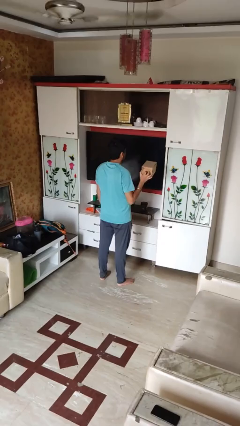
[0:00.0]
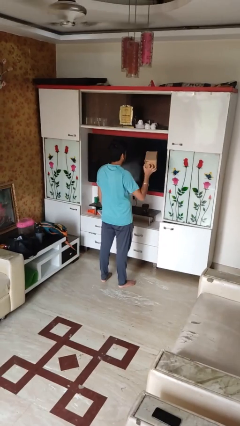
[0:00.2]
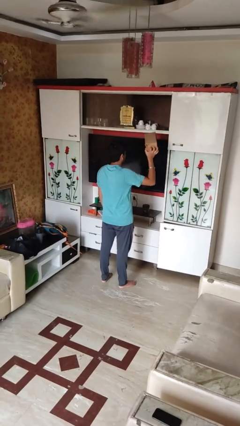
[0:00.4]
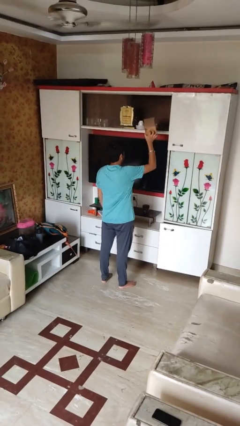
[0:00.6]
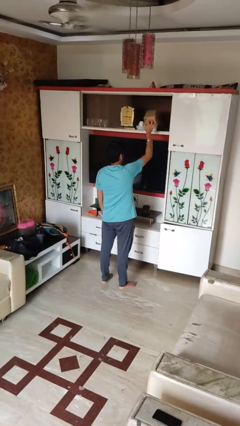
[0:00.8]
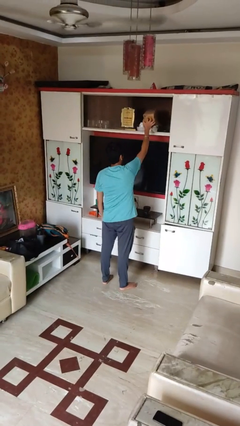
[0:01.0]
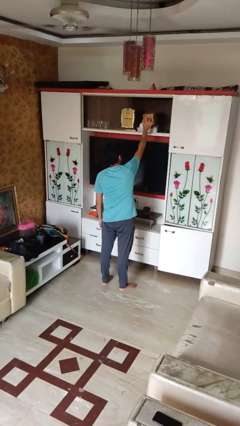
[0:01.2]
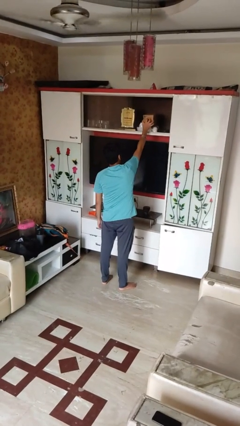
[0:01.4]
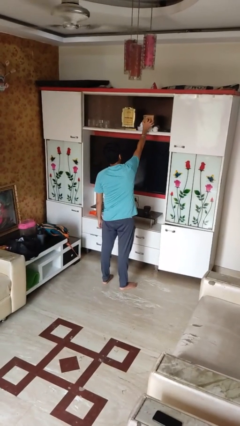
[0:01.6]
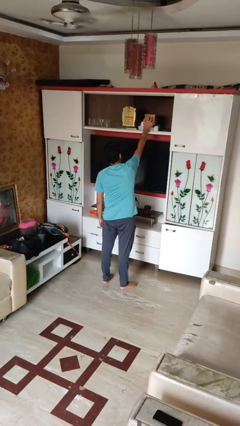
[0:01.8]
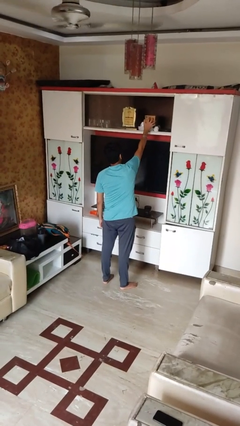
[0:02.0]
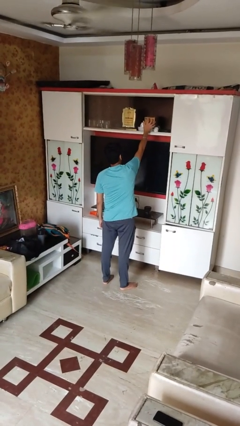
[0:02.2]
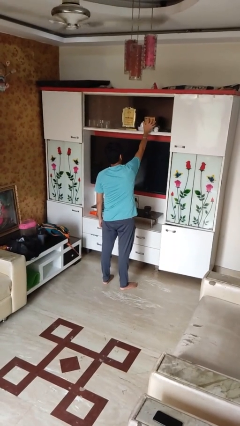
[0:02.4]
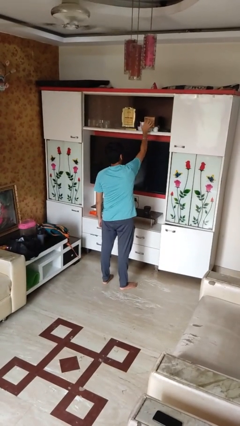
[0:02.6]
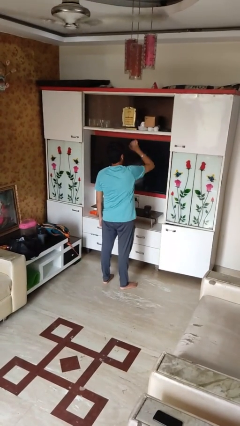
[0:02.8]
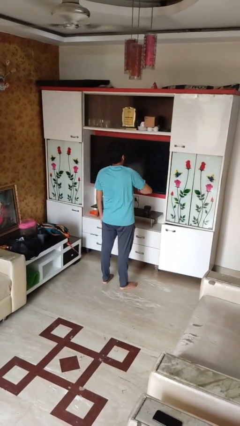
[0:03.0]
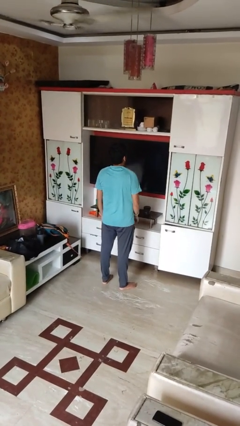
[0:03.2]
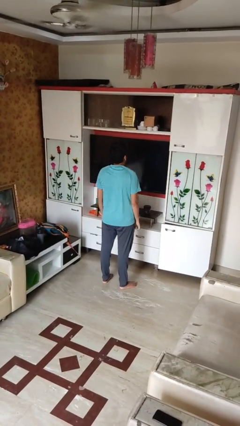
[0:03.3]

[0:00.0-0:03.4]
person puts down object on shelf

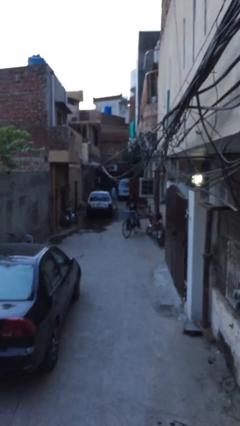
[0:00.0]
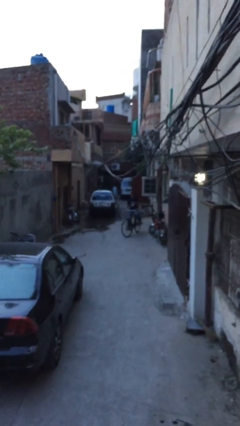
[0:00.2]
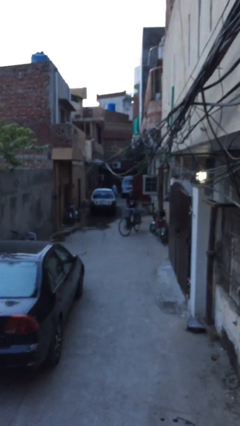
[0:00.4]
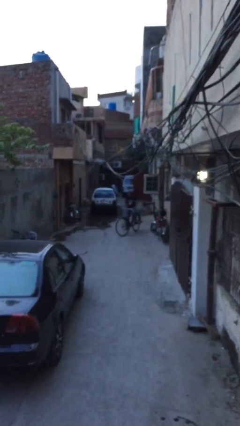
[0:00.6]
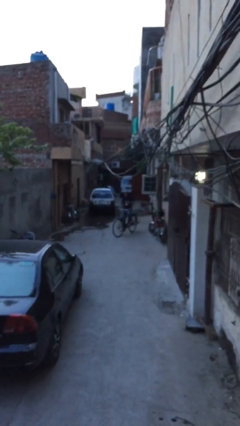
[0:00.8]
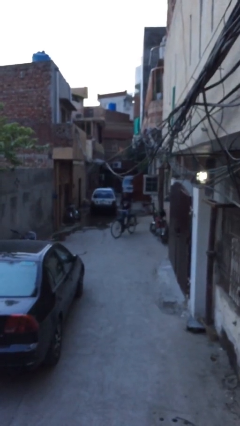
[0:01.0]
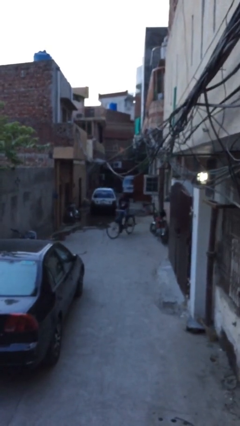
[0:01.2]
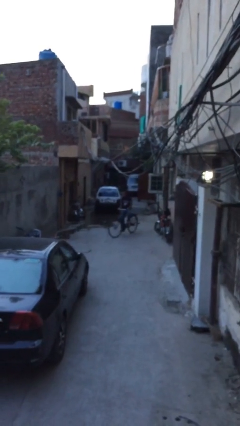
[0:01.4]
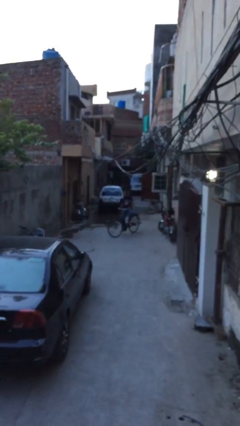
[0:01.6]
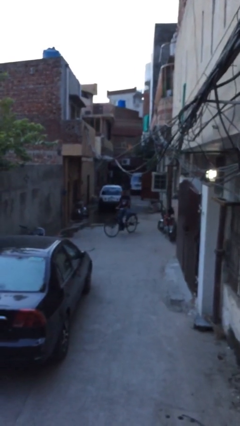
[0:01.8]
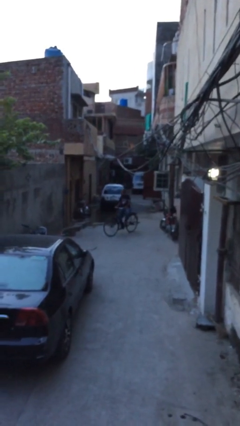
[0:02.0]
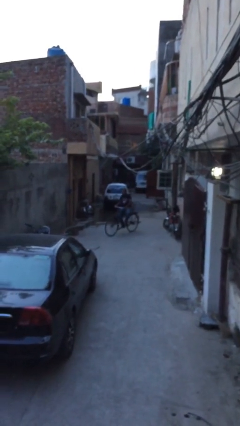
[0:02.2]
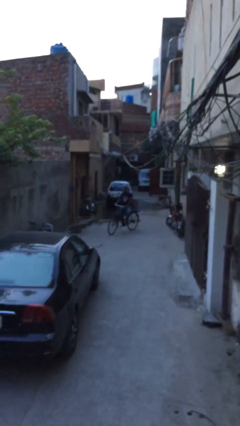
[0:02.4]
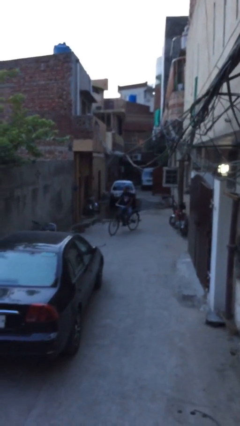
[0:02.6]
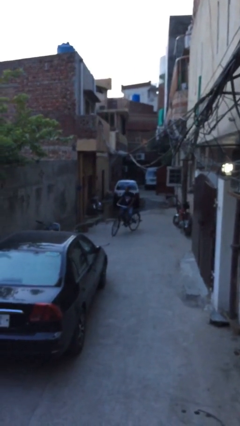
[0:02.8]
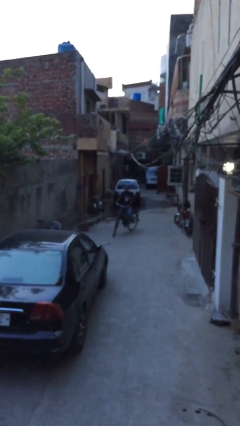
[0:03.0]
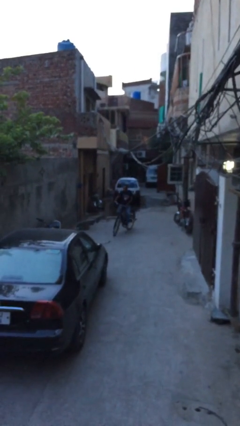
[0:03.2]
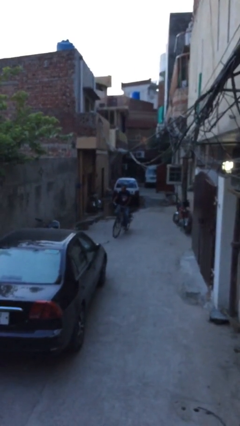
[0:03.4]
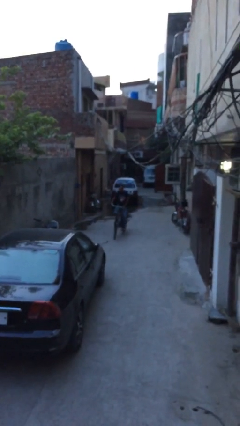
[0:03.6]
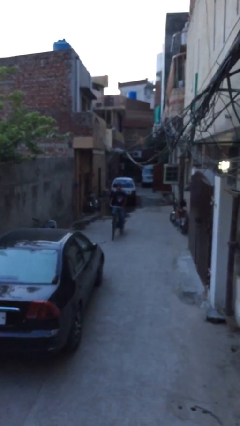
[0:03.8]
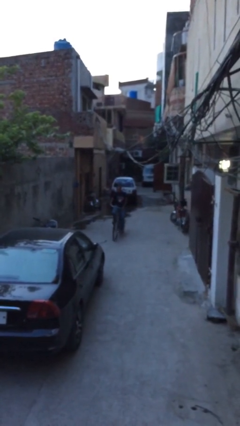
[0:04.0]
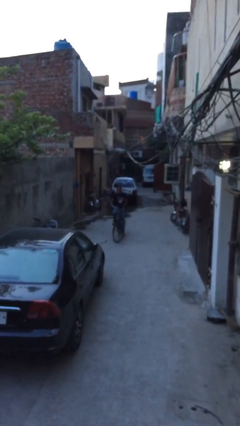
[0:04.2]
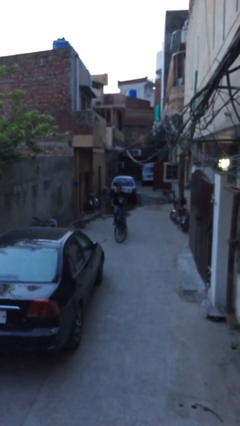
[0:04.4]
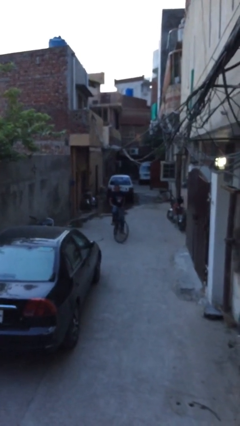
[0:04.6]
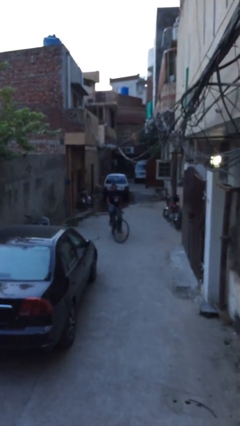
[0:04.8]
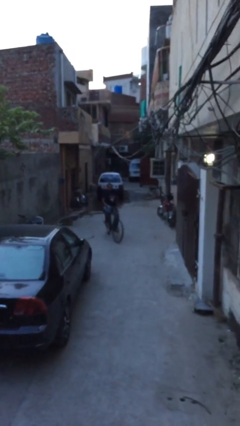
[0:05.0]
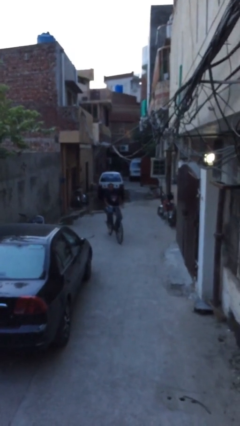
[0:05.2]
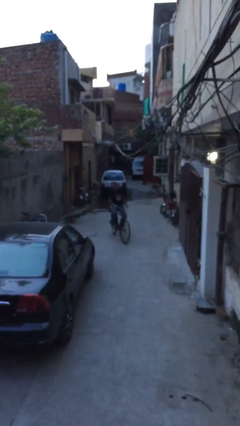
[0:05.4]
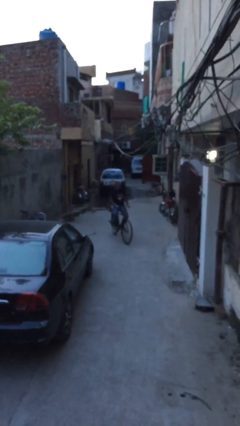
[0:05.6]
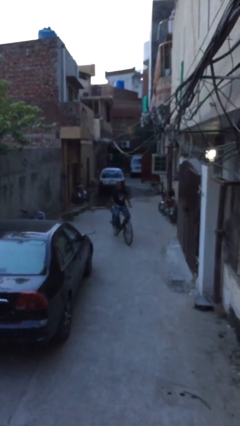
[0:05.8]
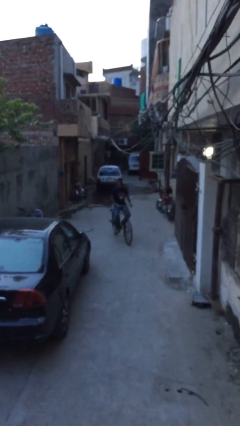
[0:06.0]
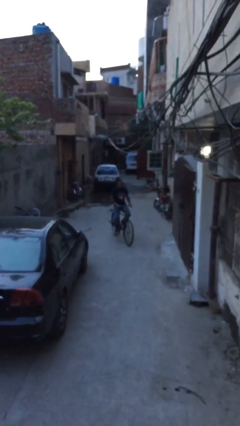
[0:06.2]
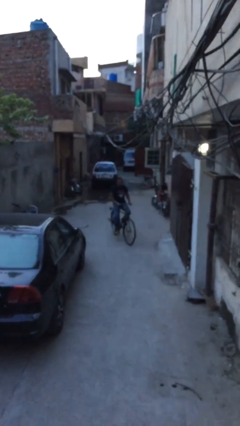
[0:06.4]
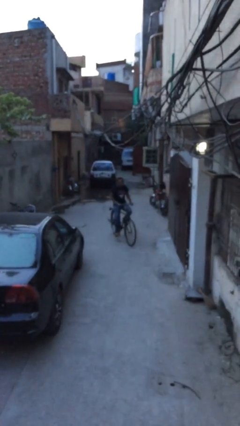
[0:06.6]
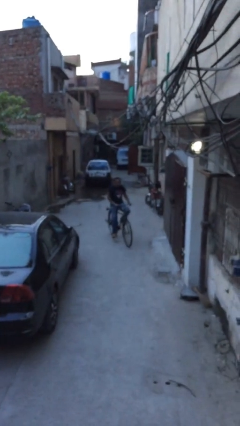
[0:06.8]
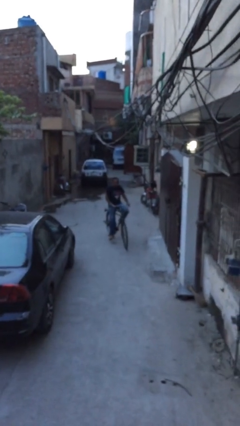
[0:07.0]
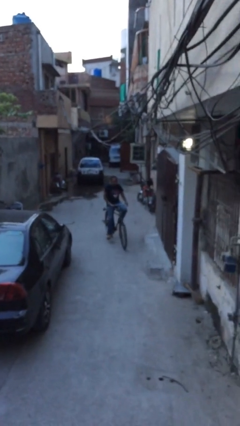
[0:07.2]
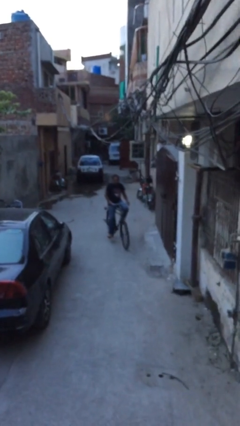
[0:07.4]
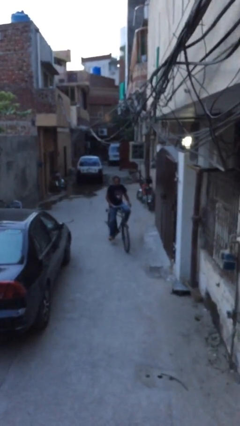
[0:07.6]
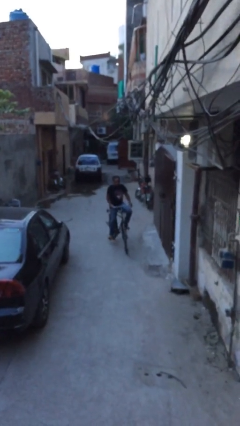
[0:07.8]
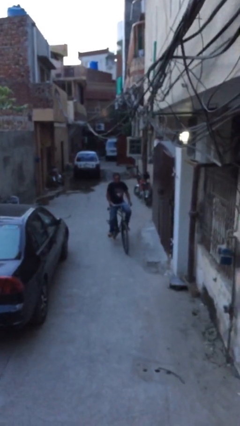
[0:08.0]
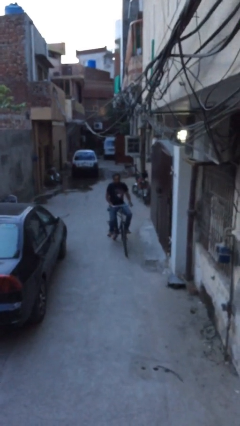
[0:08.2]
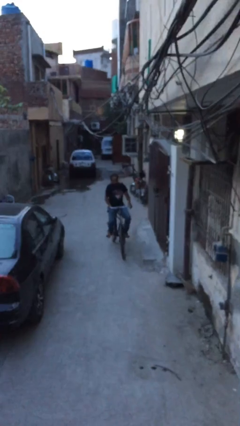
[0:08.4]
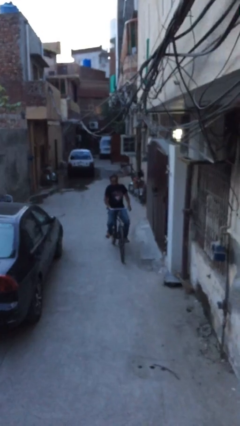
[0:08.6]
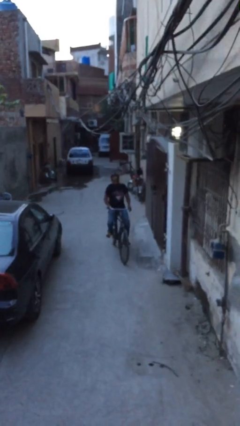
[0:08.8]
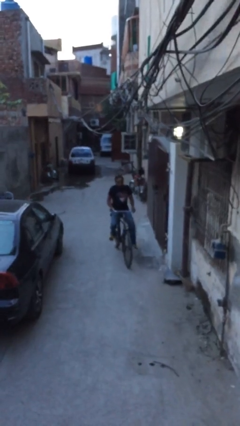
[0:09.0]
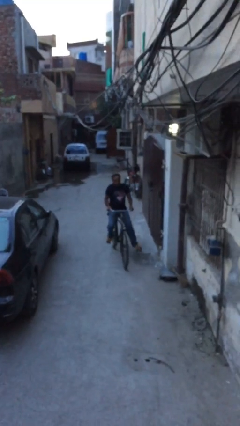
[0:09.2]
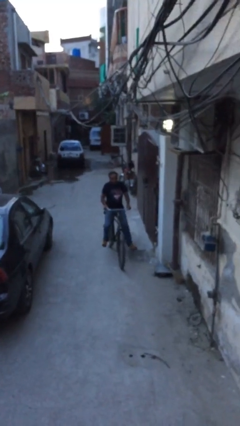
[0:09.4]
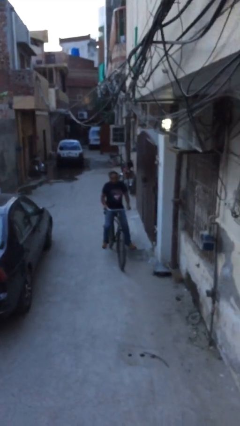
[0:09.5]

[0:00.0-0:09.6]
person rides bicycle

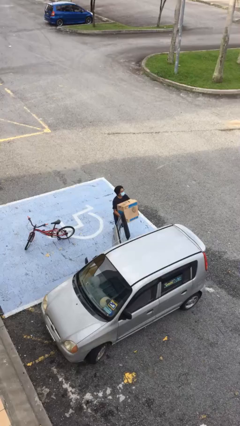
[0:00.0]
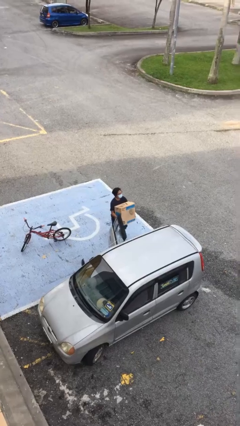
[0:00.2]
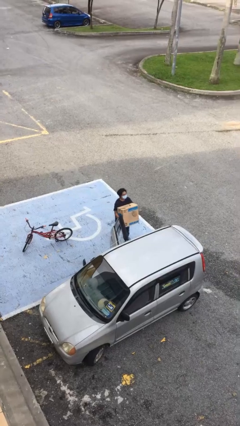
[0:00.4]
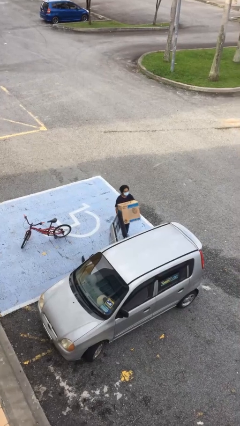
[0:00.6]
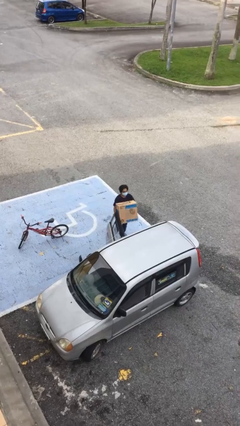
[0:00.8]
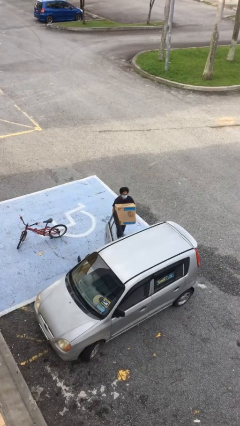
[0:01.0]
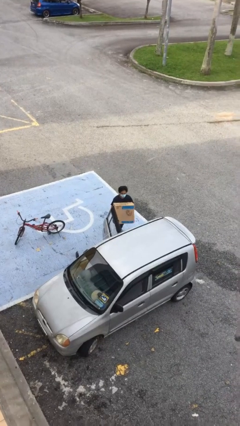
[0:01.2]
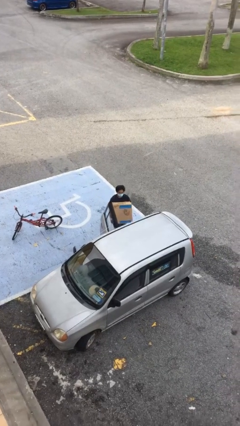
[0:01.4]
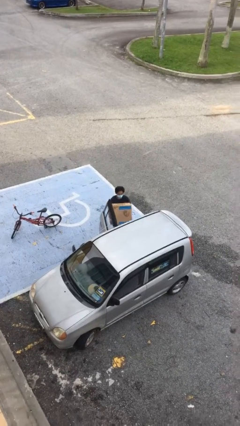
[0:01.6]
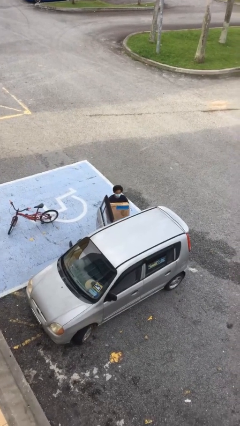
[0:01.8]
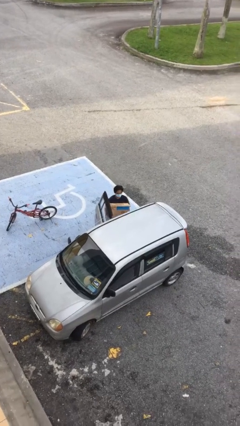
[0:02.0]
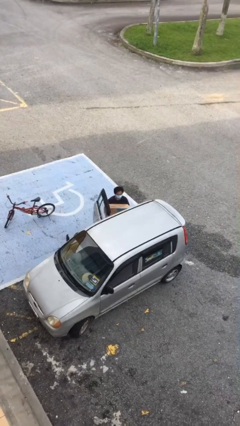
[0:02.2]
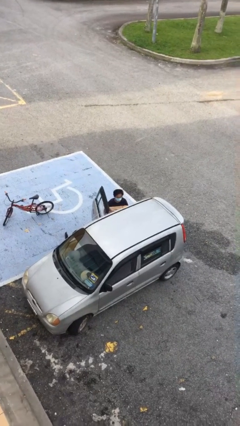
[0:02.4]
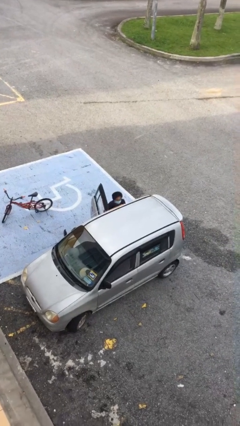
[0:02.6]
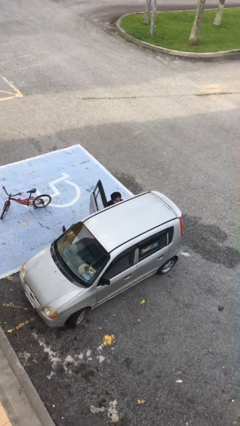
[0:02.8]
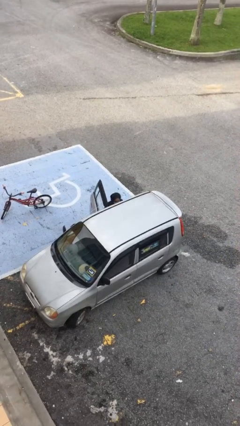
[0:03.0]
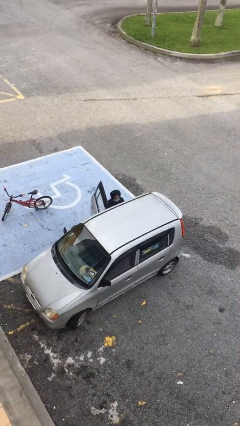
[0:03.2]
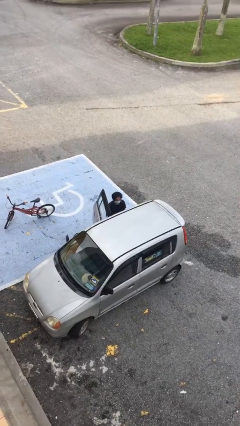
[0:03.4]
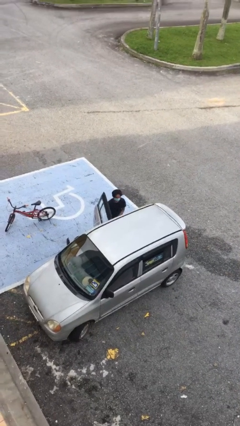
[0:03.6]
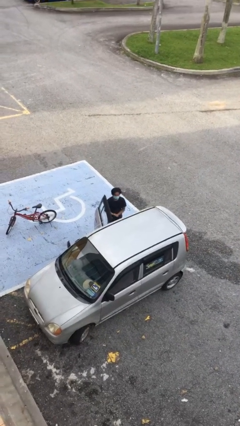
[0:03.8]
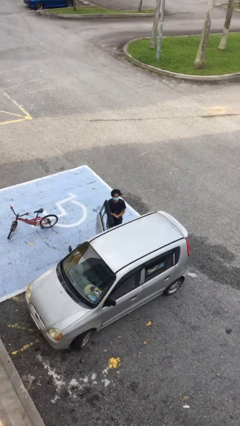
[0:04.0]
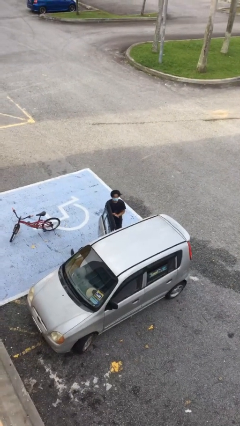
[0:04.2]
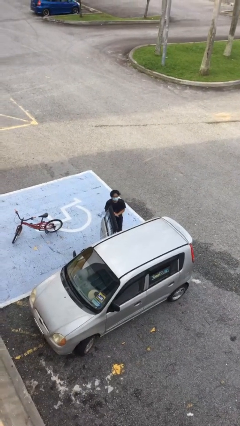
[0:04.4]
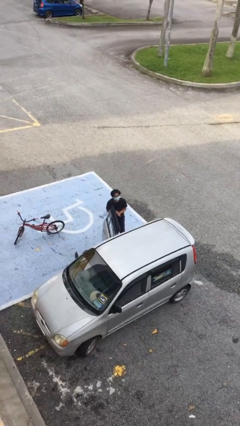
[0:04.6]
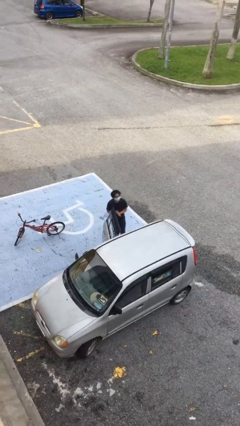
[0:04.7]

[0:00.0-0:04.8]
person loads car

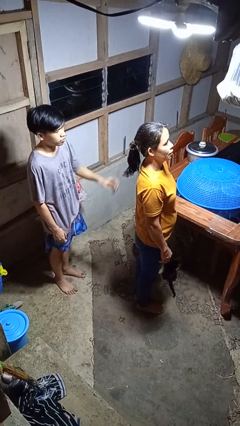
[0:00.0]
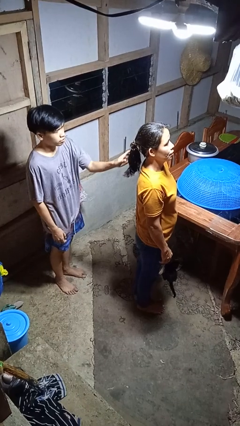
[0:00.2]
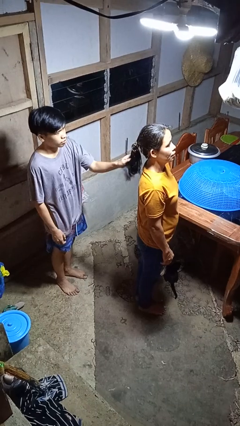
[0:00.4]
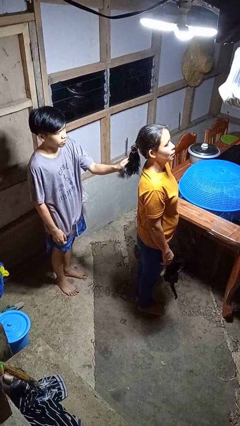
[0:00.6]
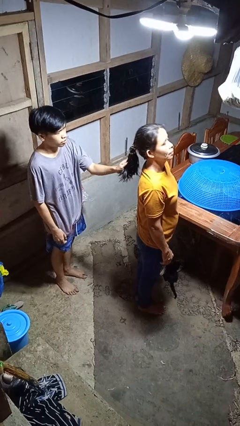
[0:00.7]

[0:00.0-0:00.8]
person grabs person by hair
